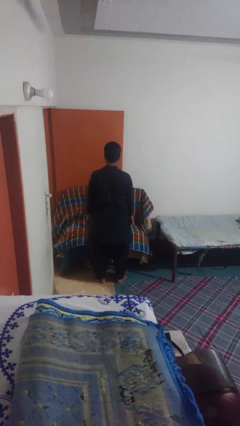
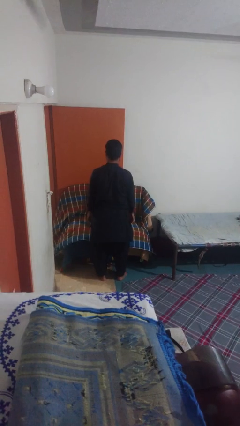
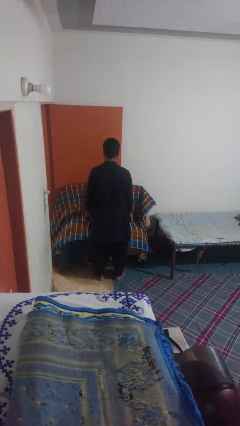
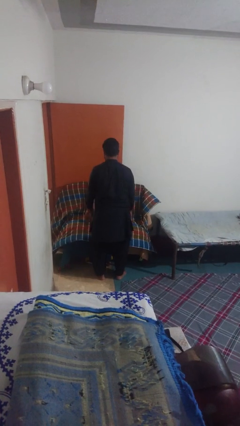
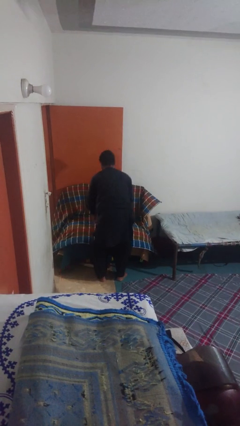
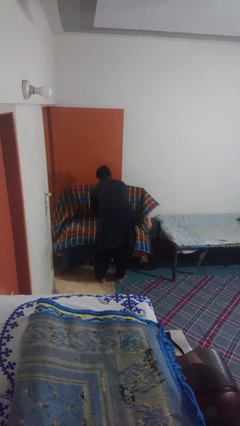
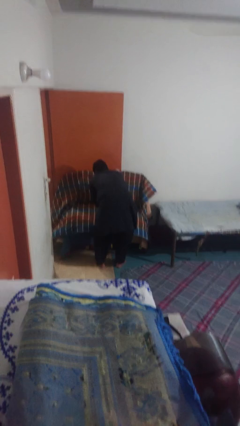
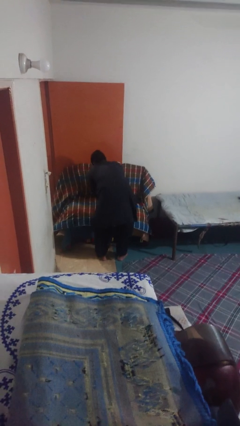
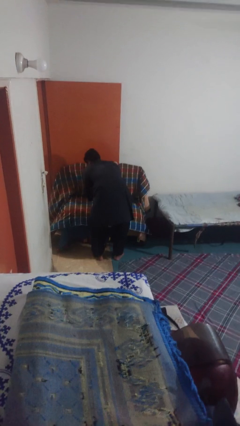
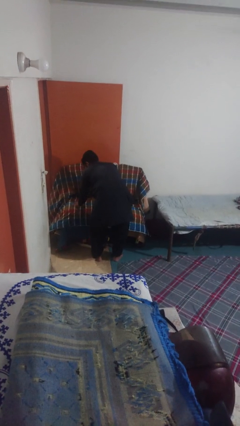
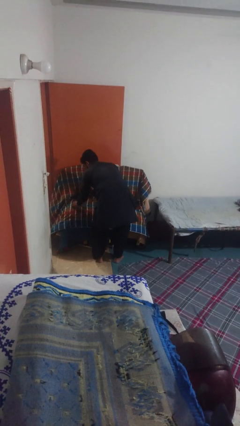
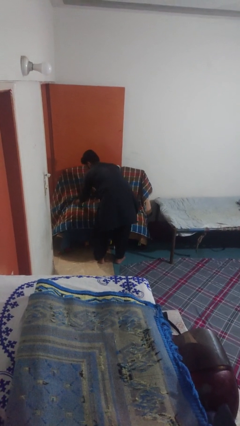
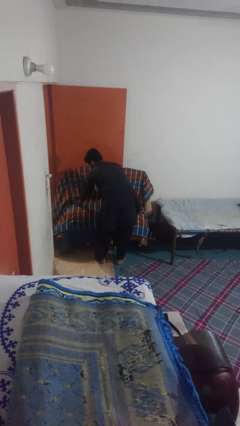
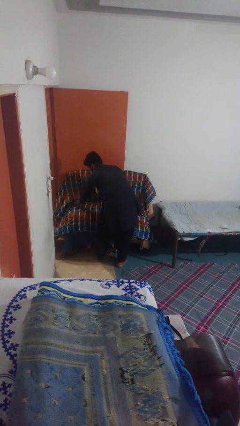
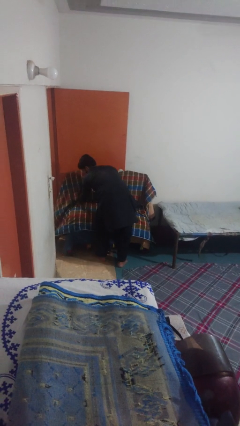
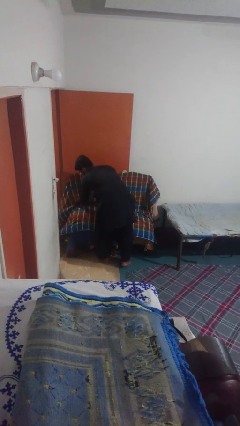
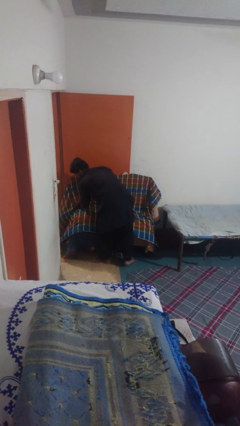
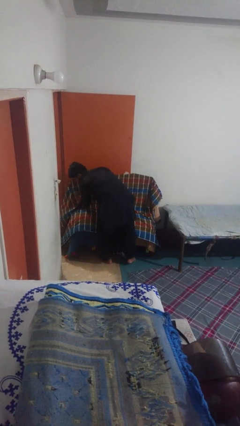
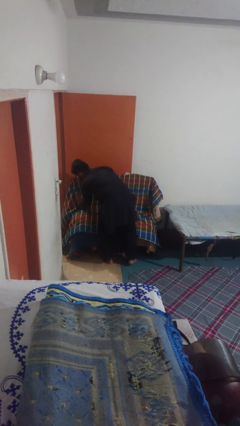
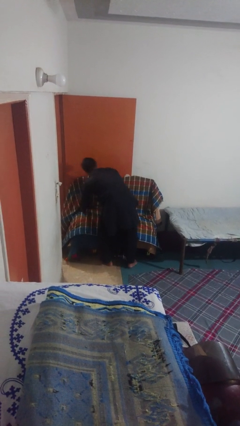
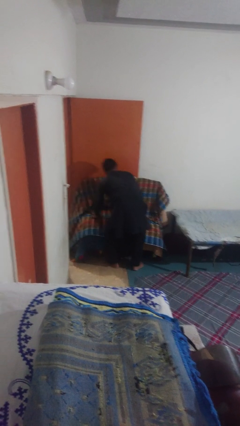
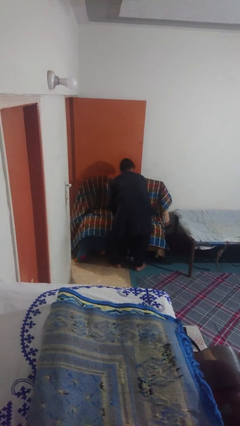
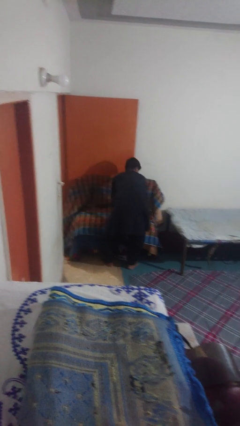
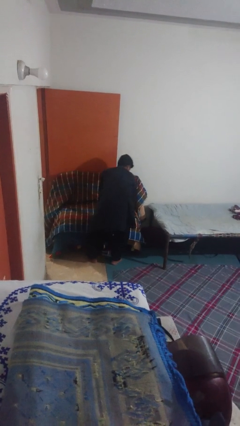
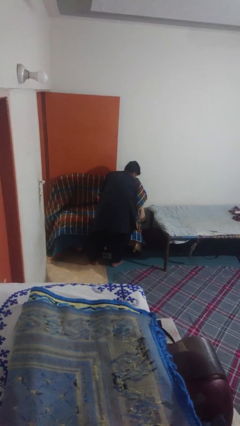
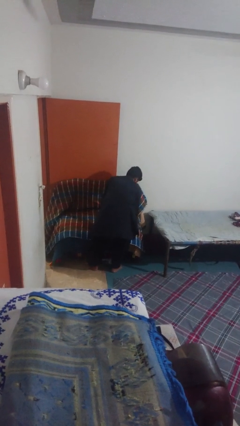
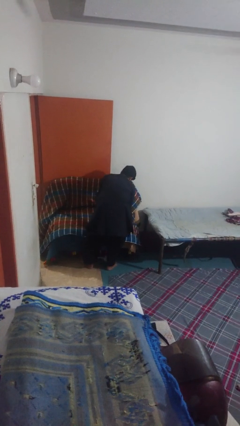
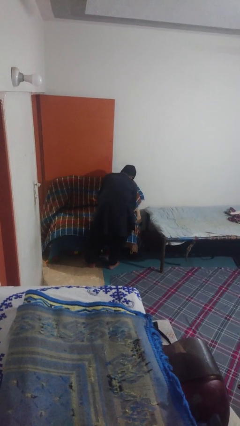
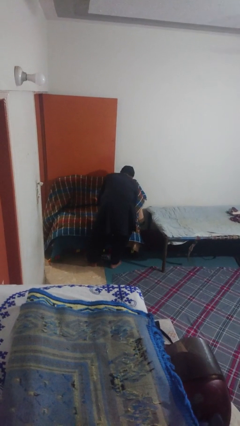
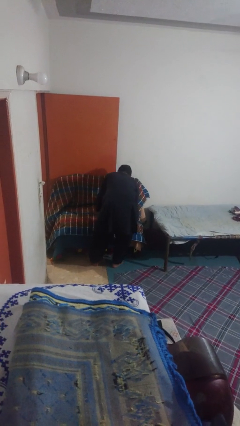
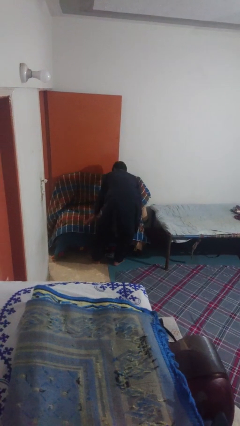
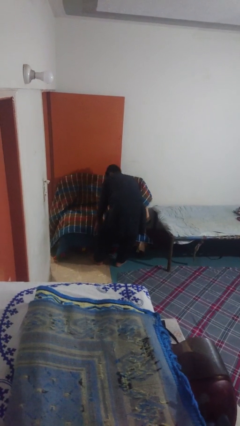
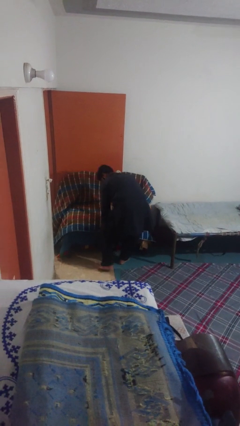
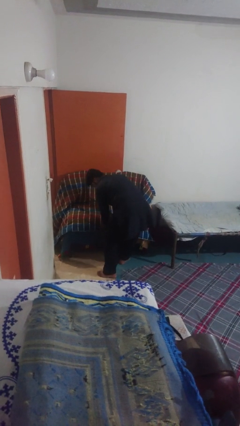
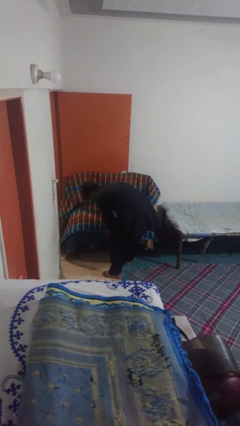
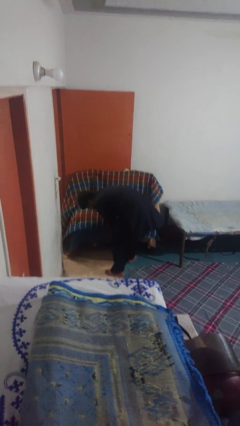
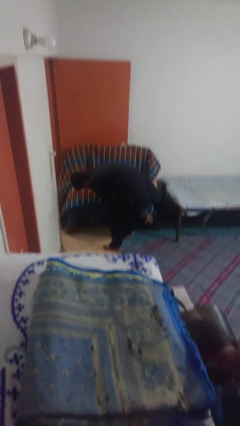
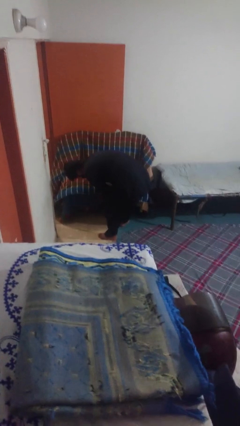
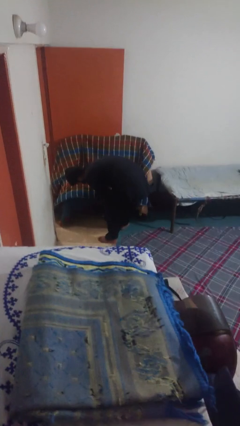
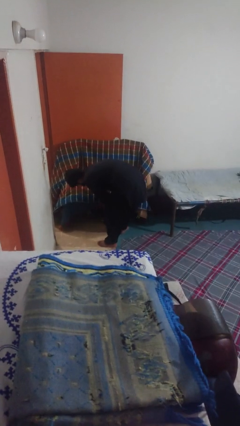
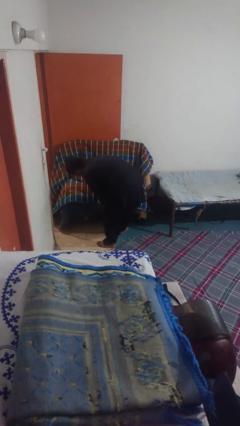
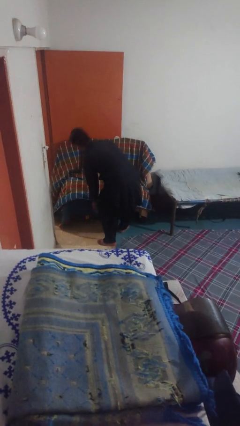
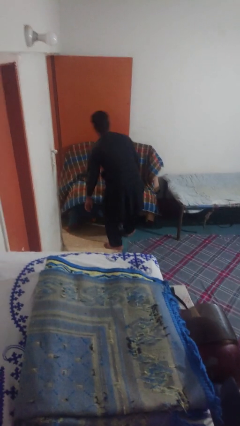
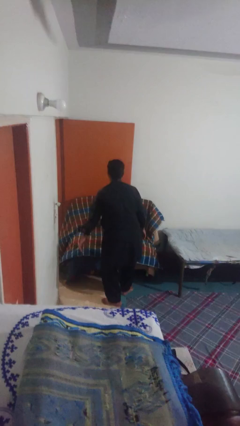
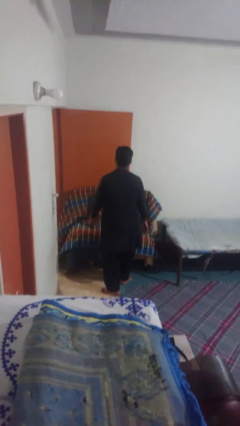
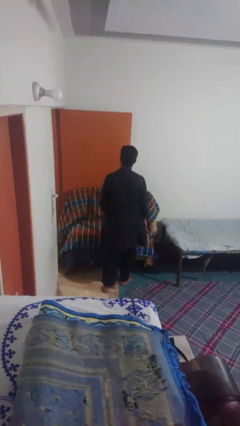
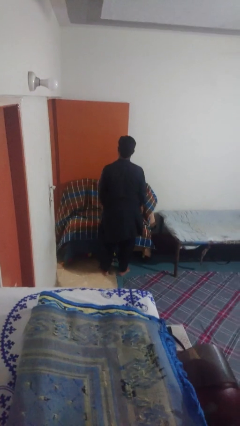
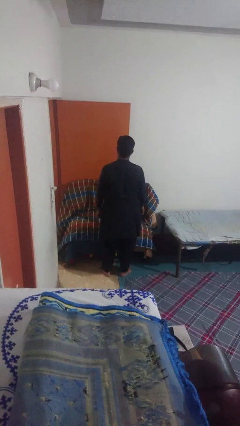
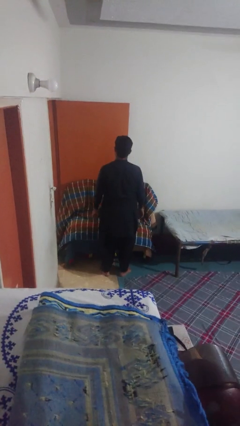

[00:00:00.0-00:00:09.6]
person searches in couch

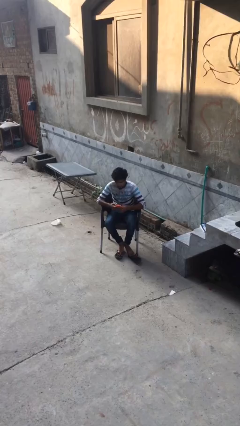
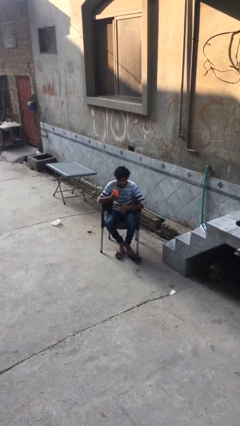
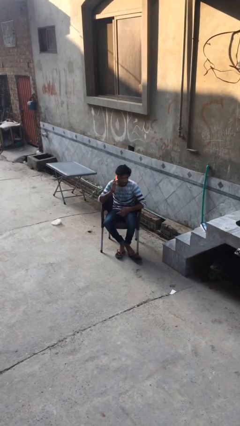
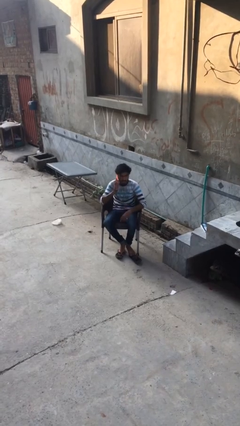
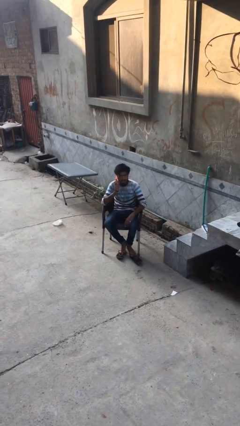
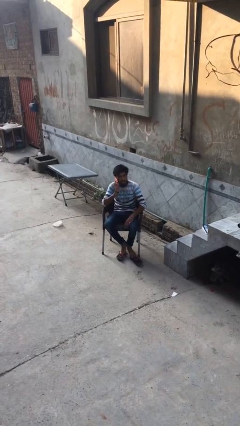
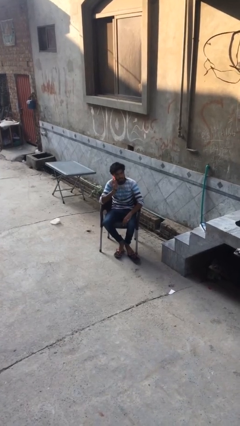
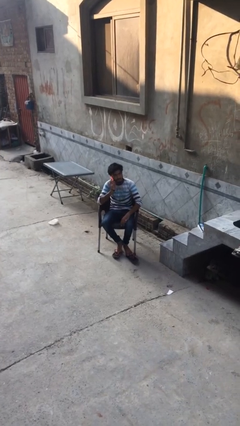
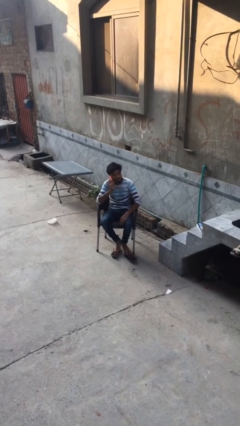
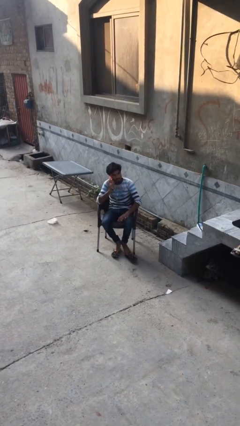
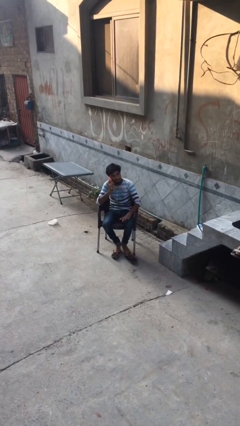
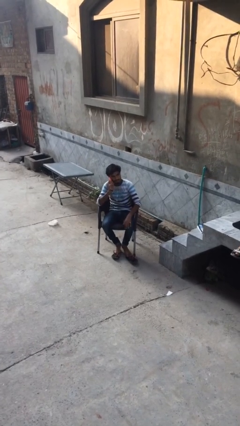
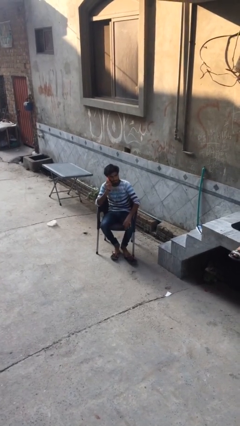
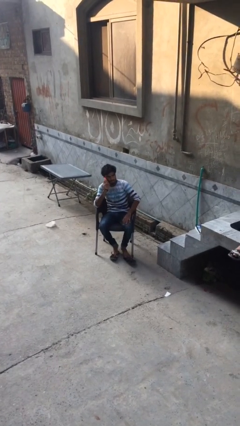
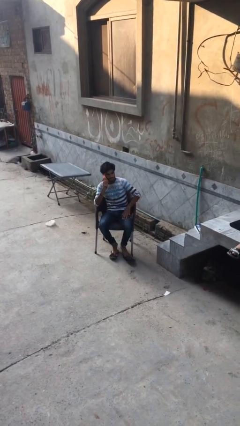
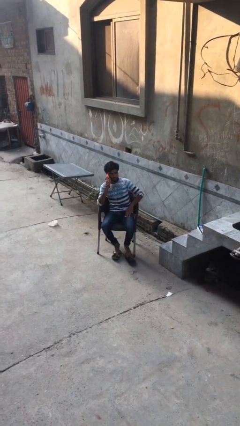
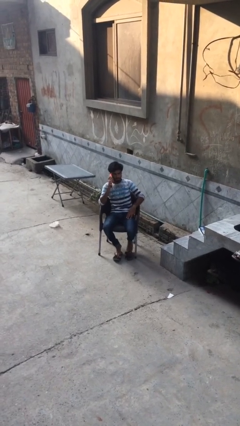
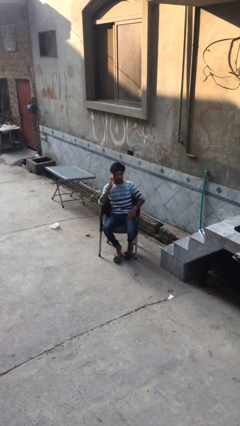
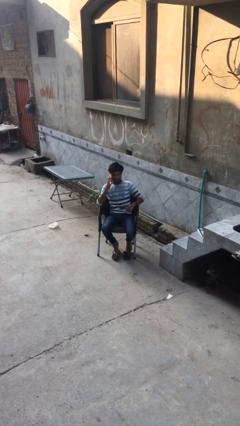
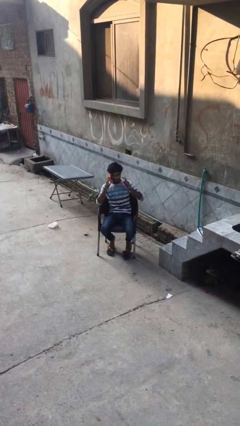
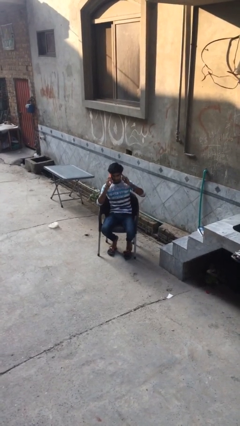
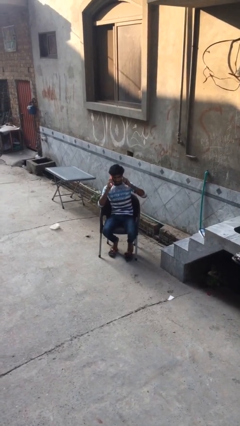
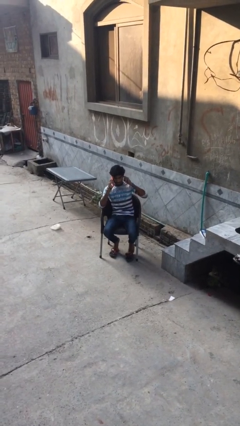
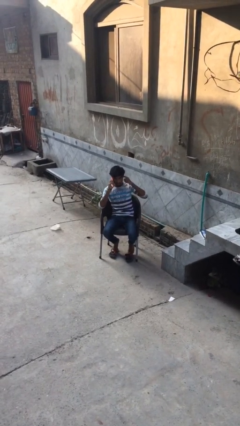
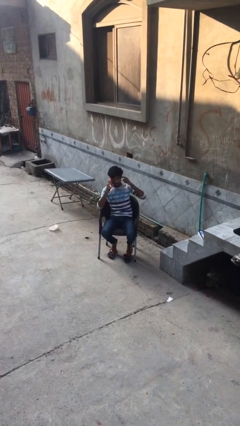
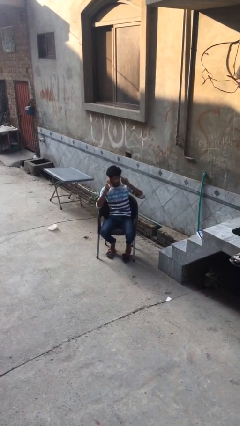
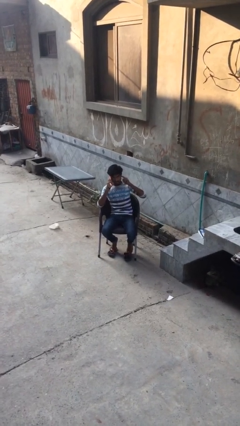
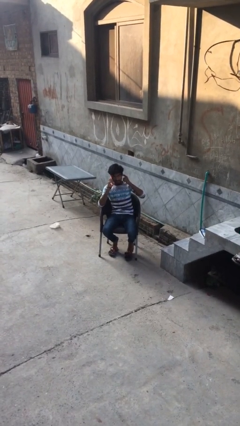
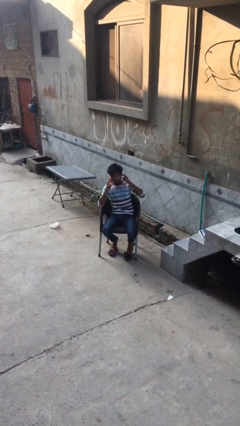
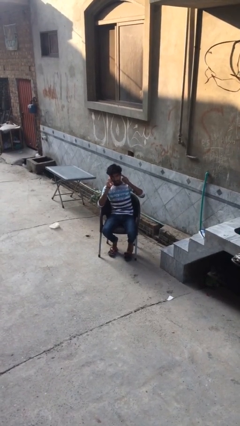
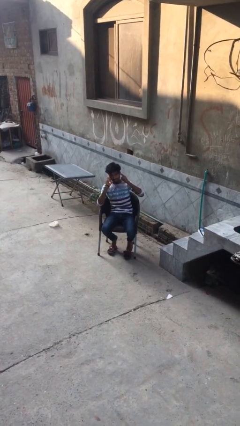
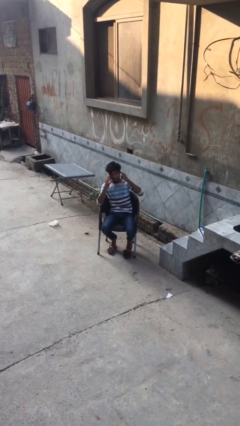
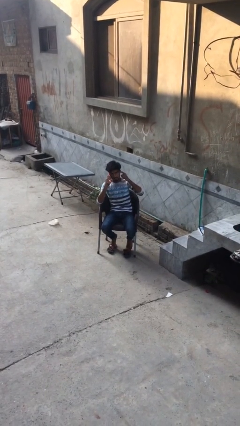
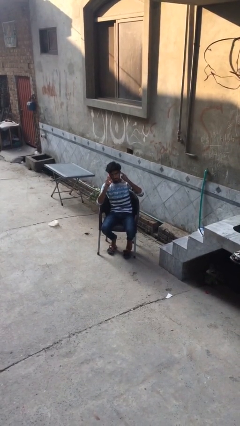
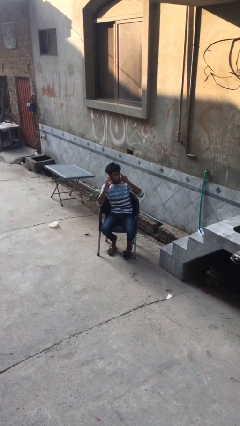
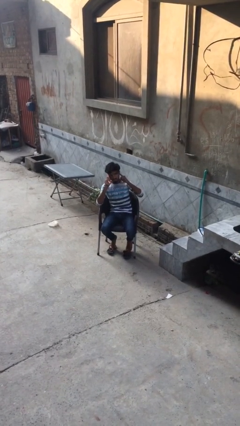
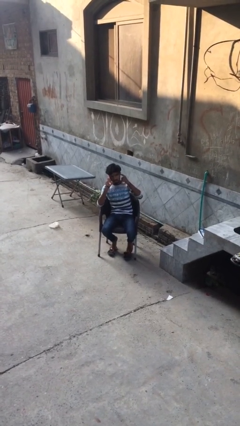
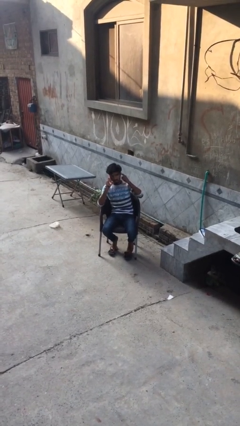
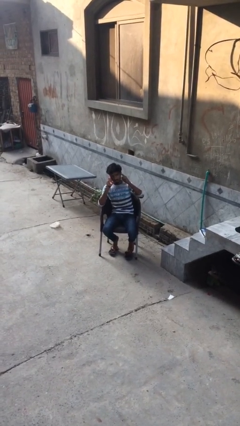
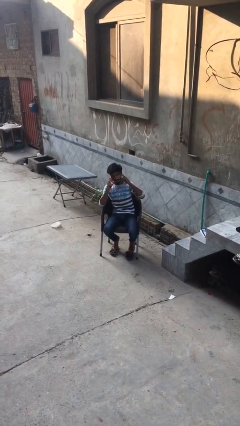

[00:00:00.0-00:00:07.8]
person talks on phone

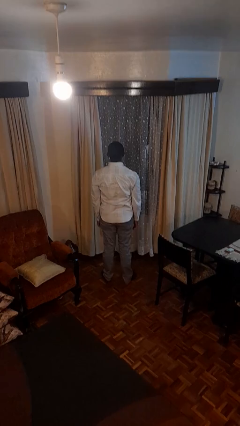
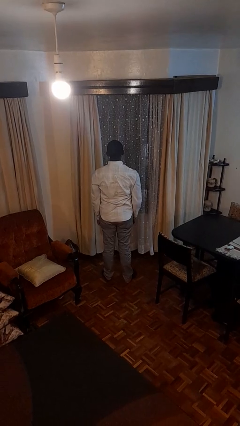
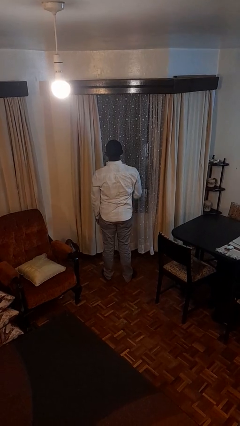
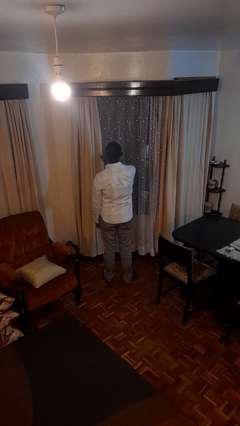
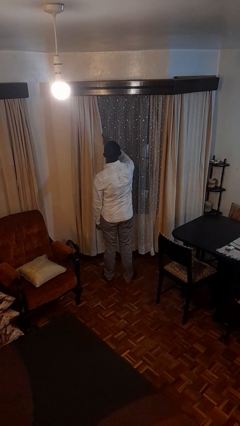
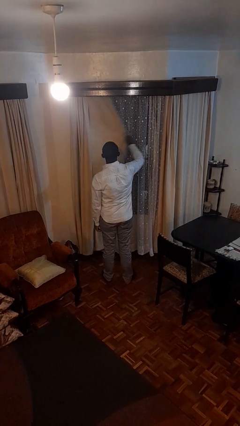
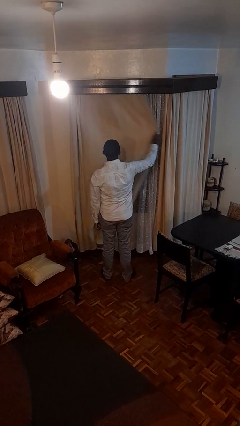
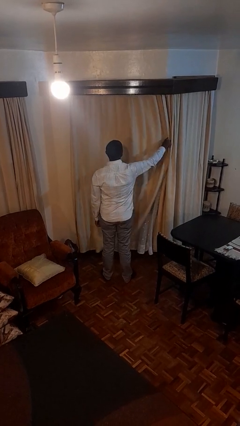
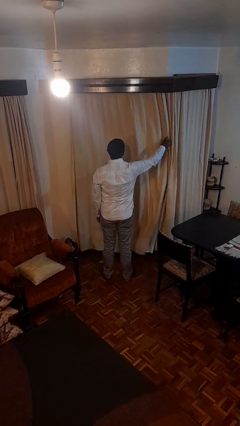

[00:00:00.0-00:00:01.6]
person closes curtains
